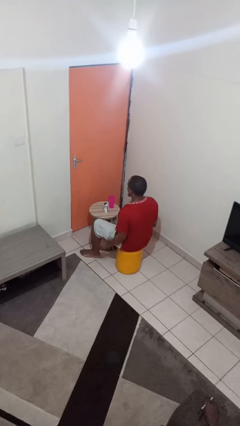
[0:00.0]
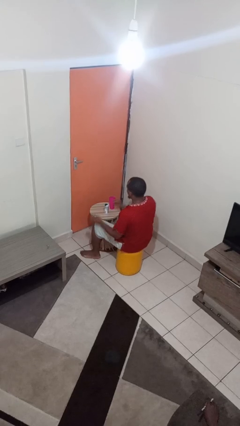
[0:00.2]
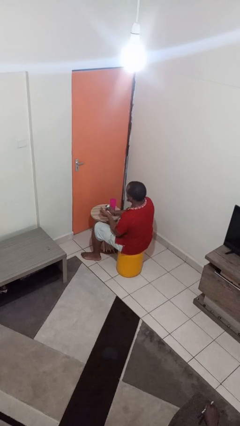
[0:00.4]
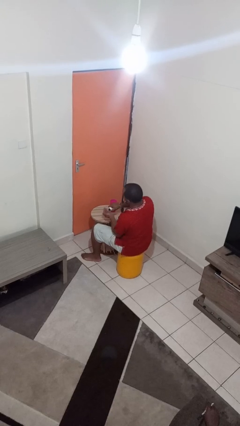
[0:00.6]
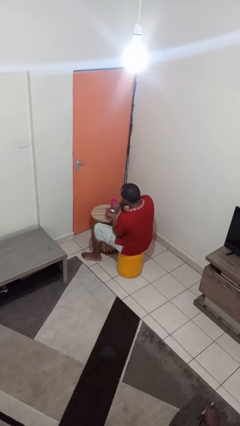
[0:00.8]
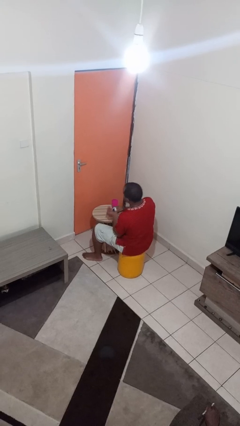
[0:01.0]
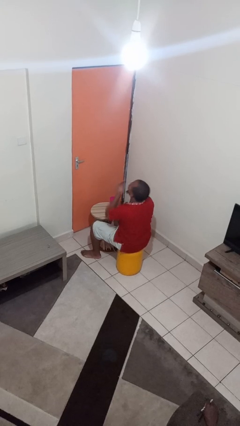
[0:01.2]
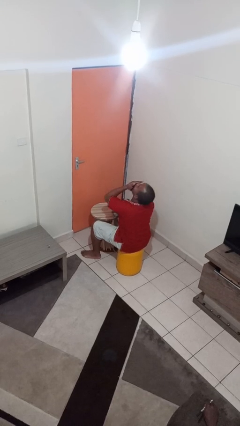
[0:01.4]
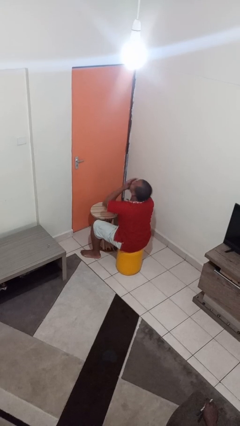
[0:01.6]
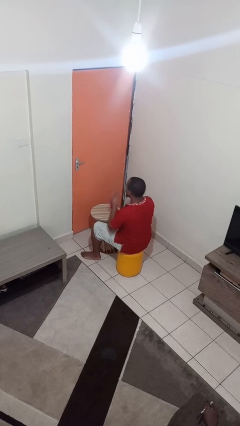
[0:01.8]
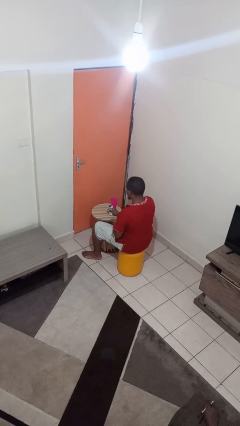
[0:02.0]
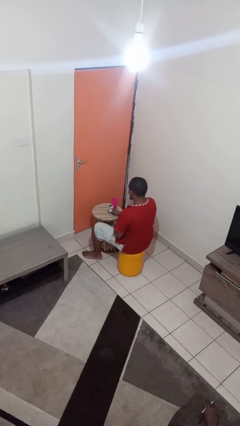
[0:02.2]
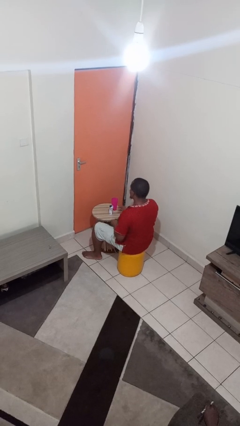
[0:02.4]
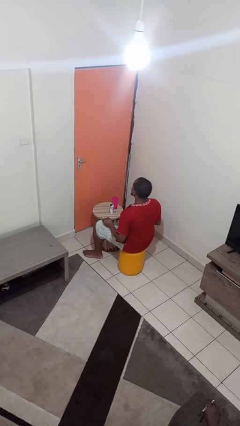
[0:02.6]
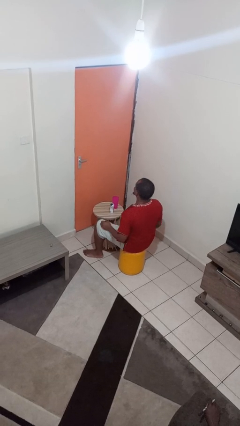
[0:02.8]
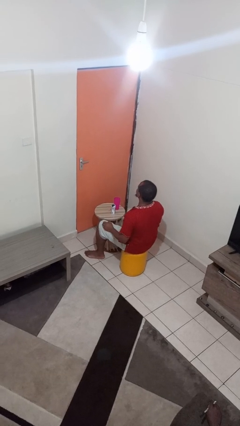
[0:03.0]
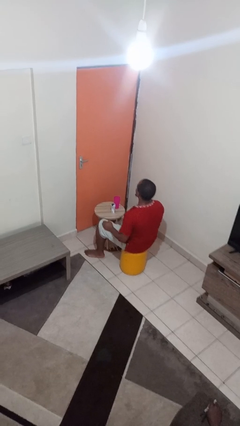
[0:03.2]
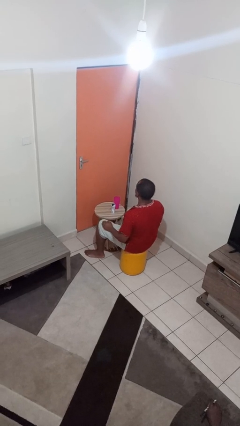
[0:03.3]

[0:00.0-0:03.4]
person takes medicine pills

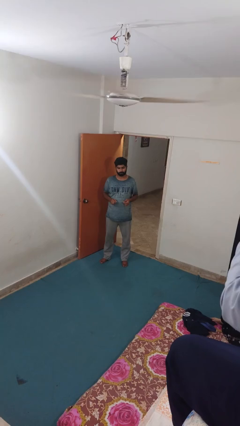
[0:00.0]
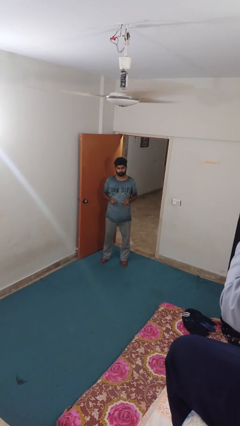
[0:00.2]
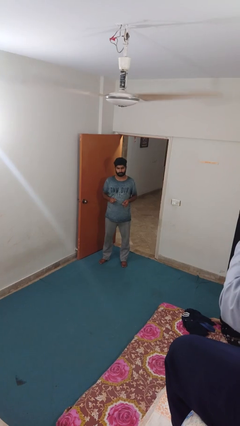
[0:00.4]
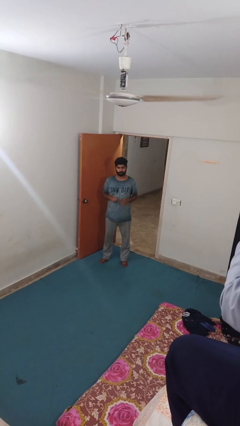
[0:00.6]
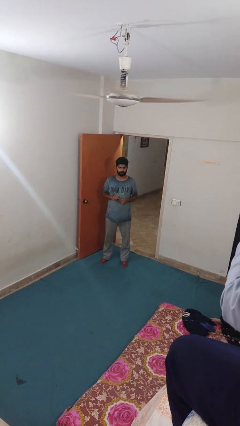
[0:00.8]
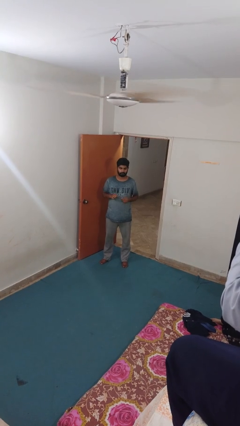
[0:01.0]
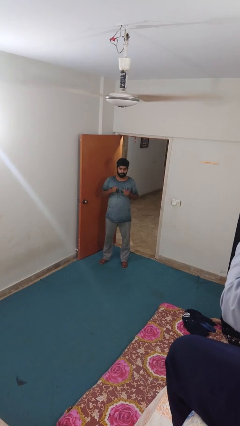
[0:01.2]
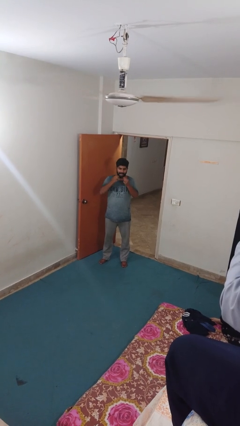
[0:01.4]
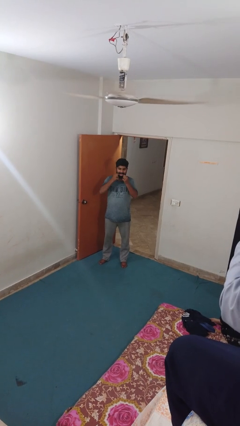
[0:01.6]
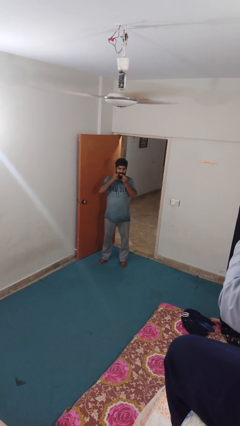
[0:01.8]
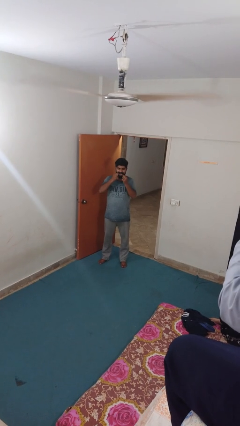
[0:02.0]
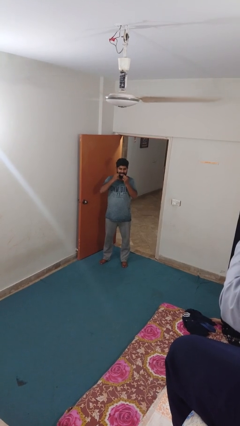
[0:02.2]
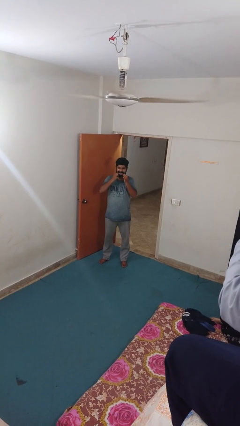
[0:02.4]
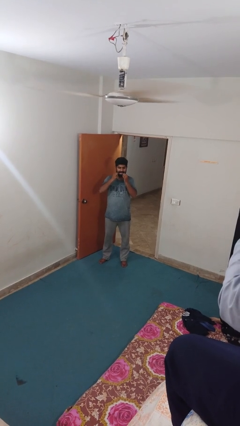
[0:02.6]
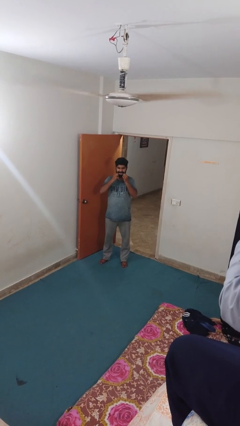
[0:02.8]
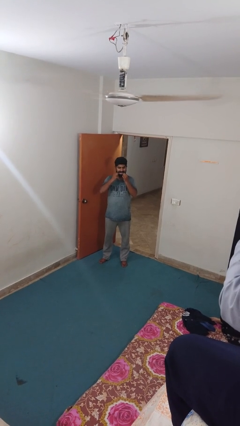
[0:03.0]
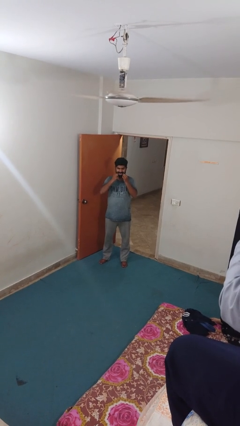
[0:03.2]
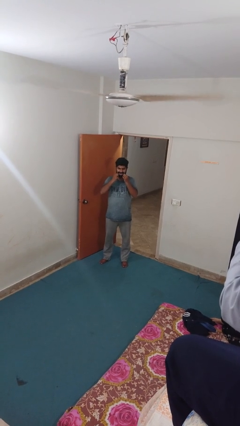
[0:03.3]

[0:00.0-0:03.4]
person flosses

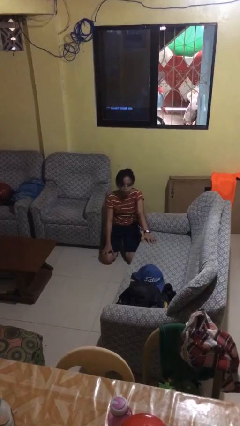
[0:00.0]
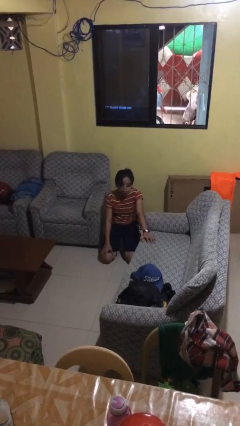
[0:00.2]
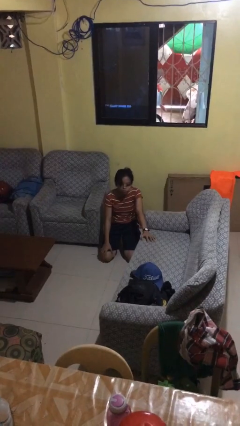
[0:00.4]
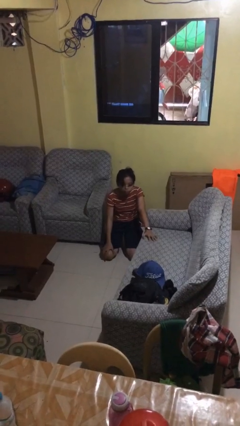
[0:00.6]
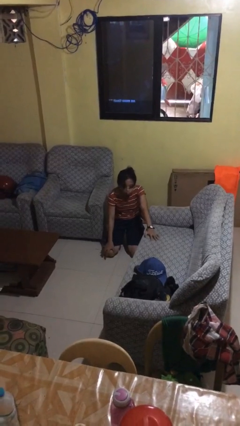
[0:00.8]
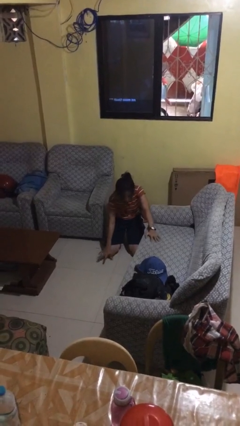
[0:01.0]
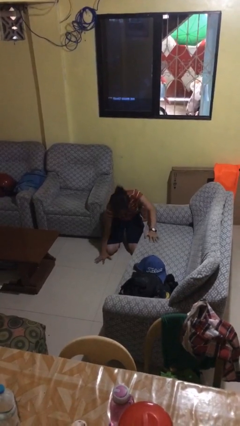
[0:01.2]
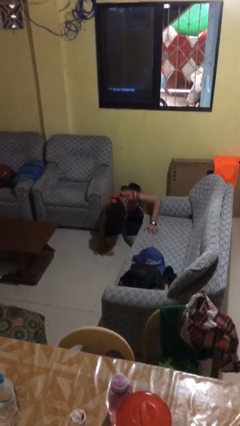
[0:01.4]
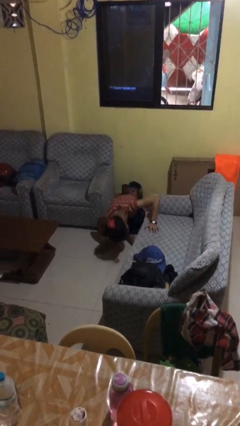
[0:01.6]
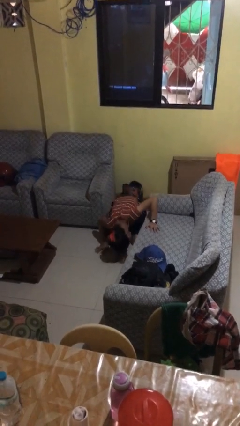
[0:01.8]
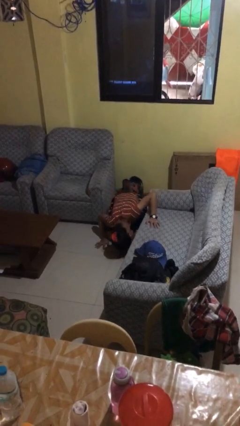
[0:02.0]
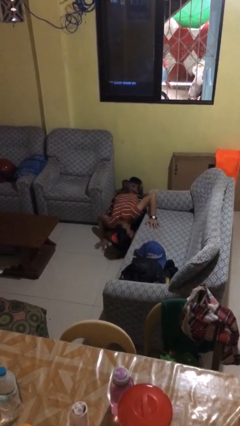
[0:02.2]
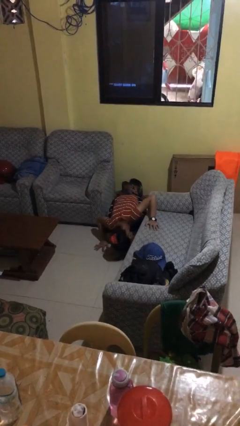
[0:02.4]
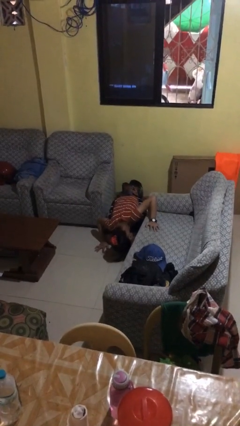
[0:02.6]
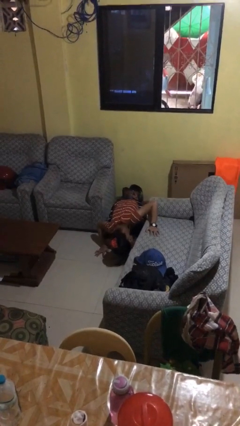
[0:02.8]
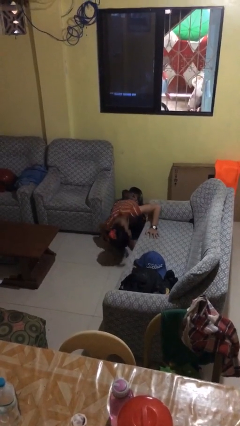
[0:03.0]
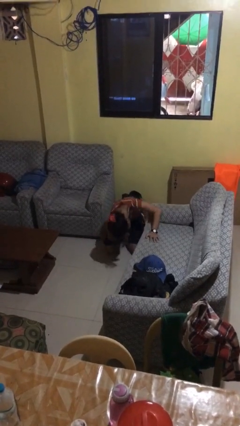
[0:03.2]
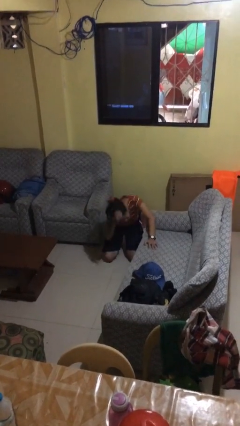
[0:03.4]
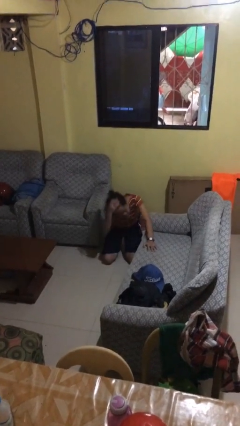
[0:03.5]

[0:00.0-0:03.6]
person searches under couch

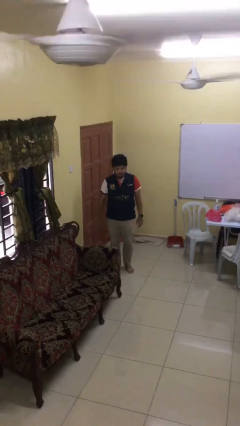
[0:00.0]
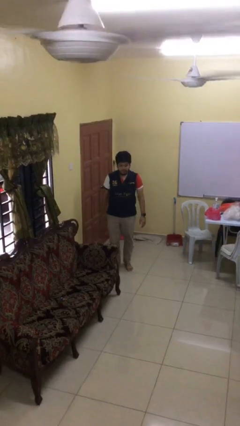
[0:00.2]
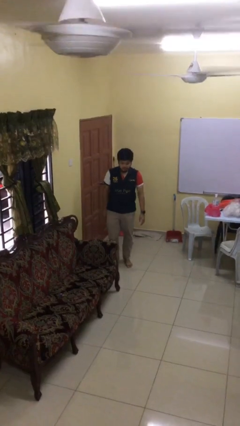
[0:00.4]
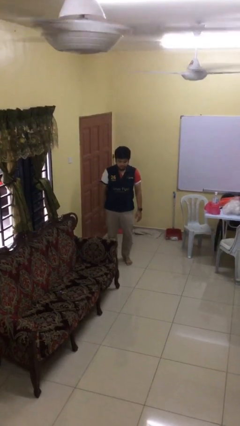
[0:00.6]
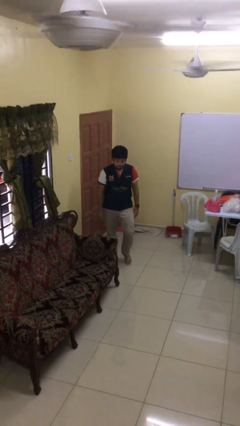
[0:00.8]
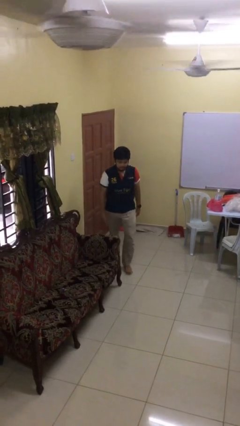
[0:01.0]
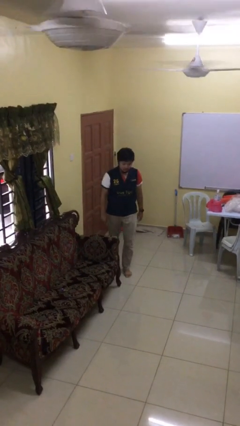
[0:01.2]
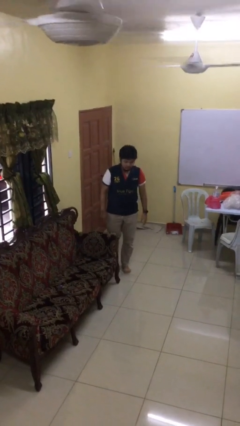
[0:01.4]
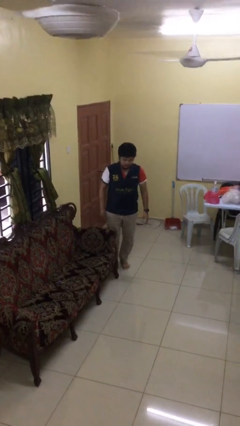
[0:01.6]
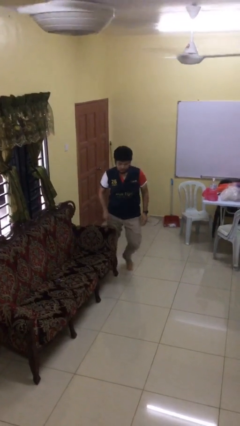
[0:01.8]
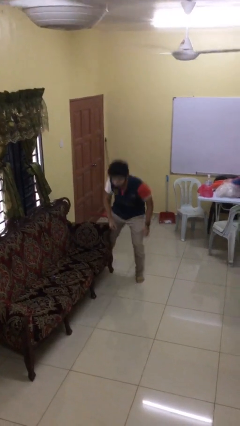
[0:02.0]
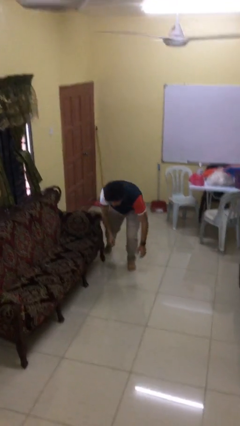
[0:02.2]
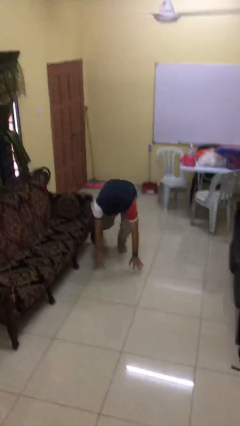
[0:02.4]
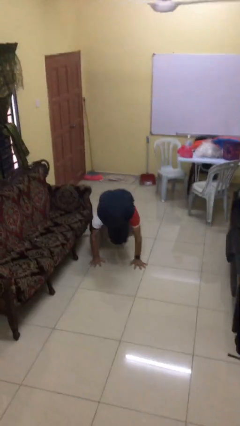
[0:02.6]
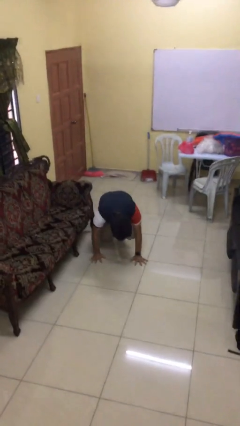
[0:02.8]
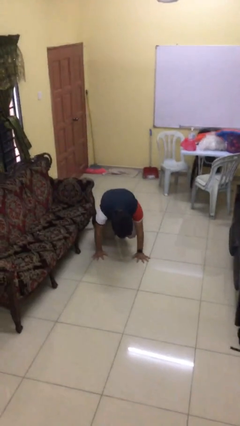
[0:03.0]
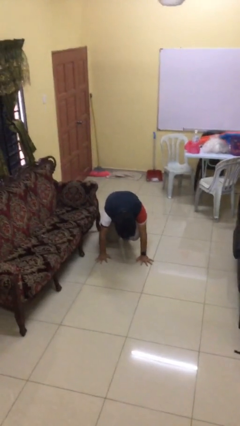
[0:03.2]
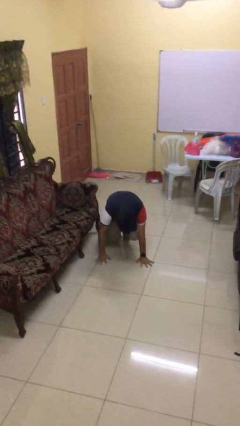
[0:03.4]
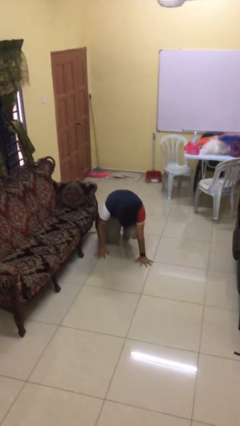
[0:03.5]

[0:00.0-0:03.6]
person trips on object on floor

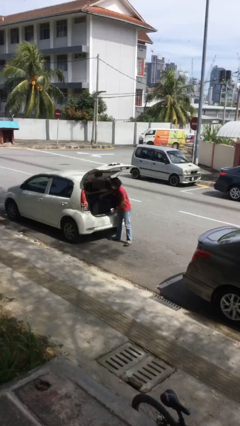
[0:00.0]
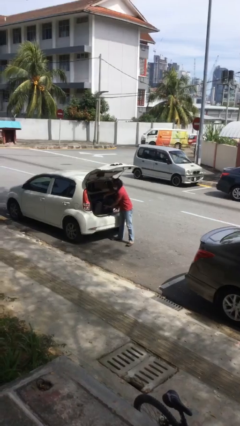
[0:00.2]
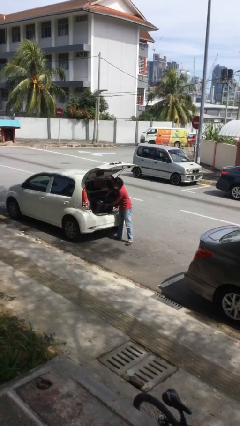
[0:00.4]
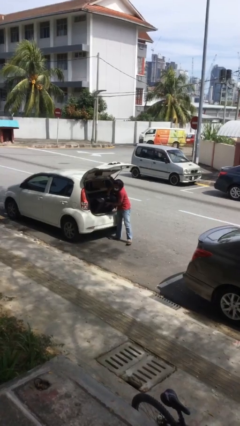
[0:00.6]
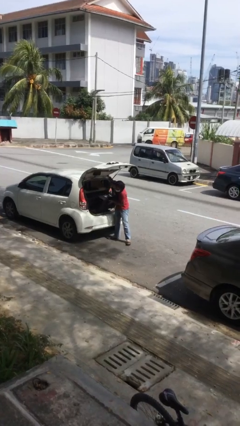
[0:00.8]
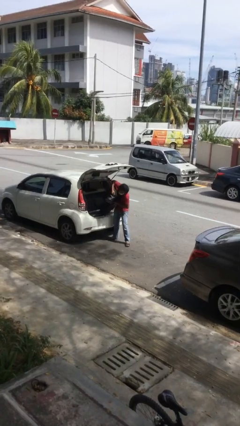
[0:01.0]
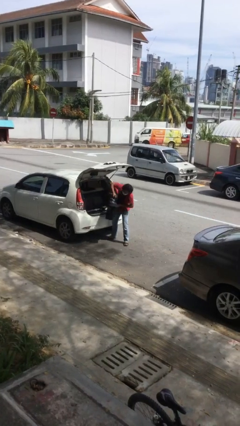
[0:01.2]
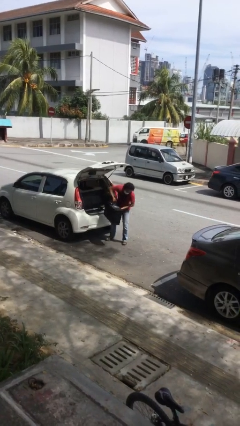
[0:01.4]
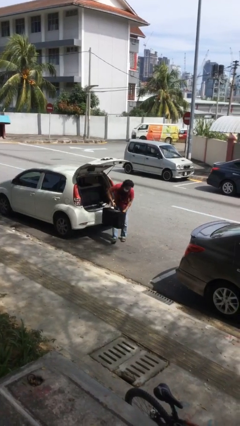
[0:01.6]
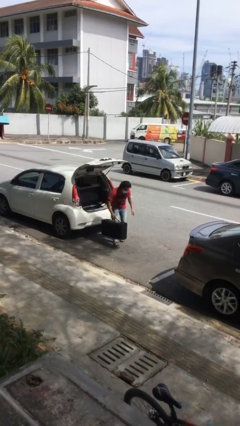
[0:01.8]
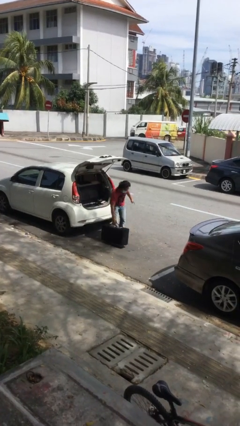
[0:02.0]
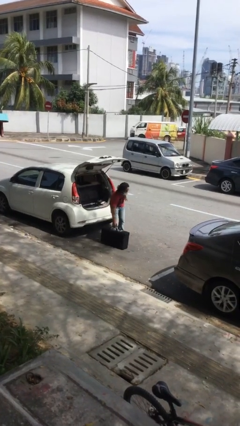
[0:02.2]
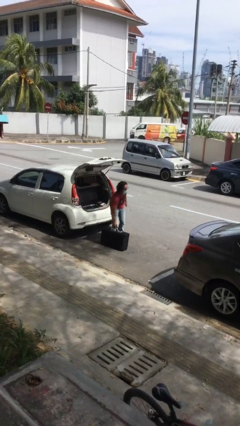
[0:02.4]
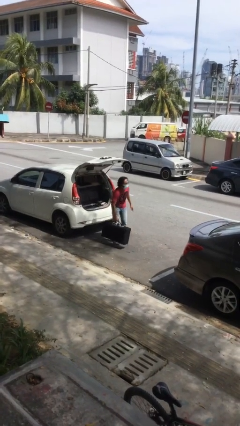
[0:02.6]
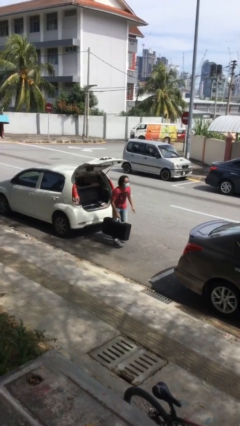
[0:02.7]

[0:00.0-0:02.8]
person unloads car

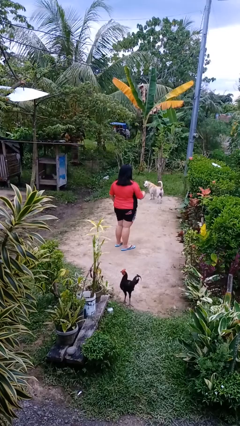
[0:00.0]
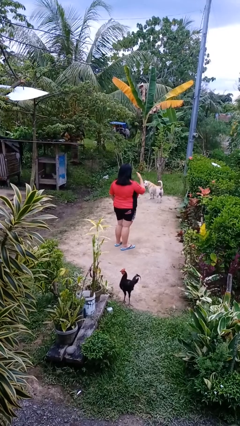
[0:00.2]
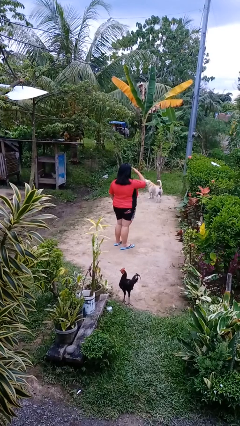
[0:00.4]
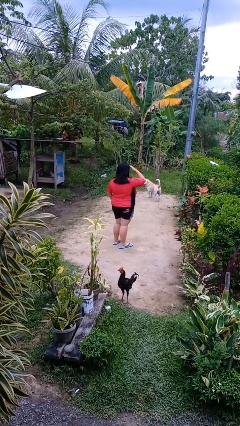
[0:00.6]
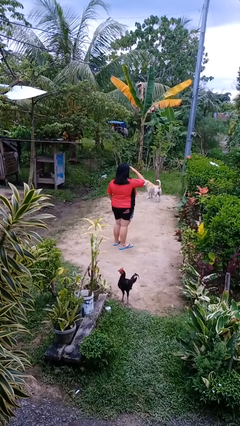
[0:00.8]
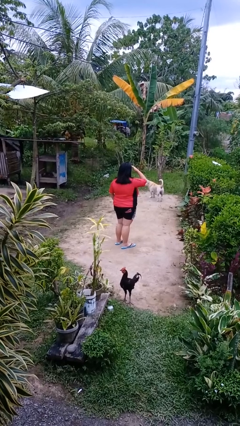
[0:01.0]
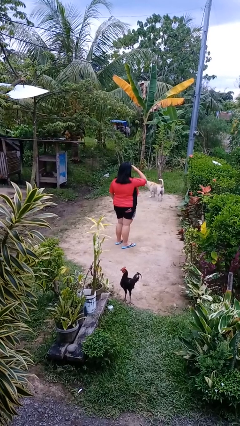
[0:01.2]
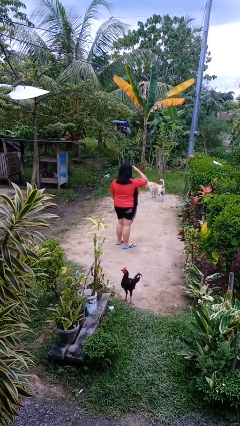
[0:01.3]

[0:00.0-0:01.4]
person shades eyes
